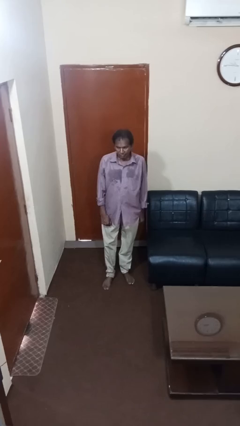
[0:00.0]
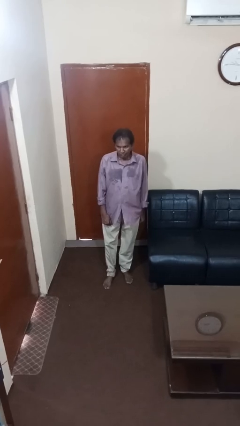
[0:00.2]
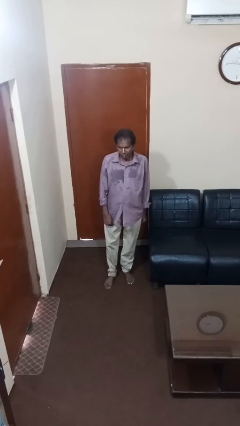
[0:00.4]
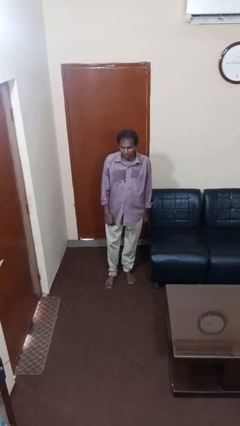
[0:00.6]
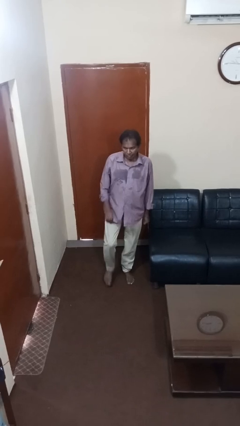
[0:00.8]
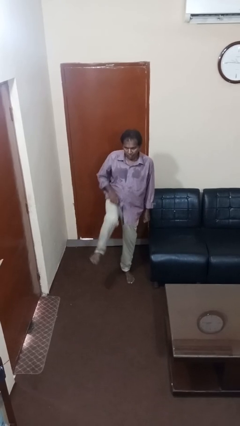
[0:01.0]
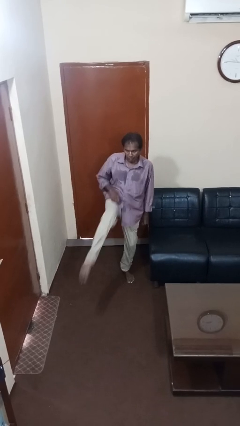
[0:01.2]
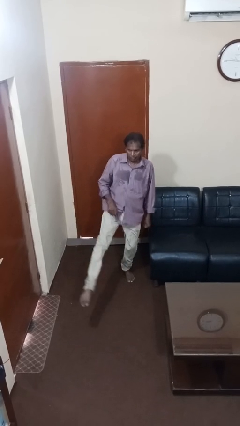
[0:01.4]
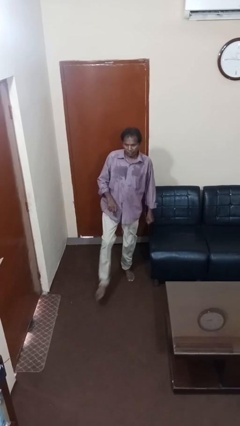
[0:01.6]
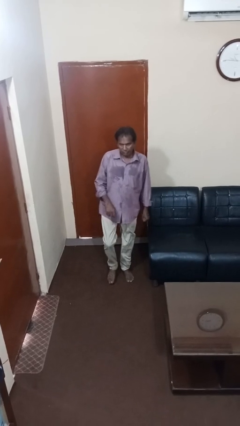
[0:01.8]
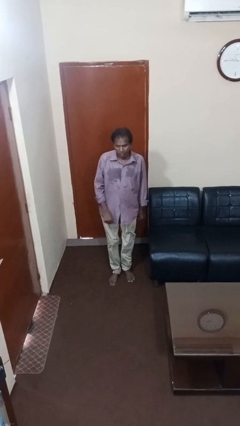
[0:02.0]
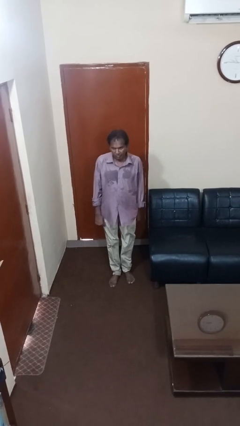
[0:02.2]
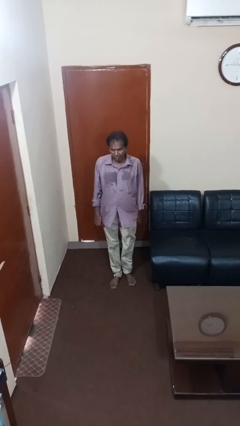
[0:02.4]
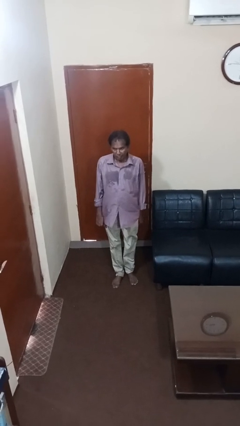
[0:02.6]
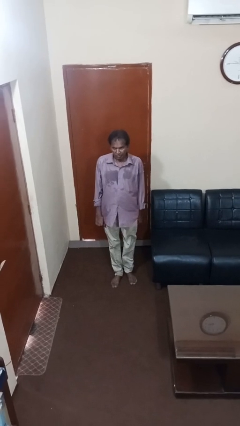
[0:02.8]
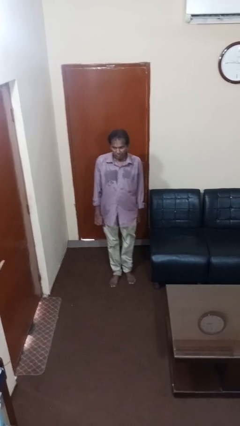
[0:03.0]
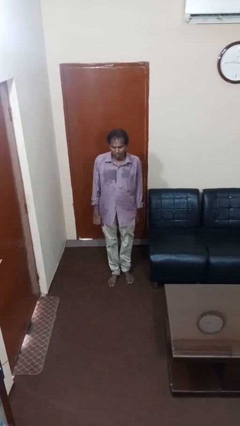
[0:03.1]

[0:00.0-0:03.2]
person karate kicks

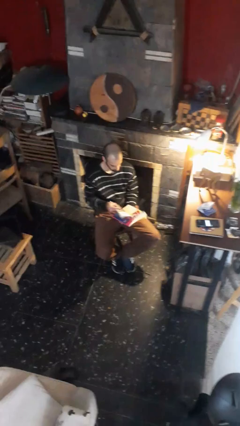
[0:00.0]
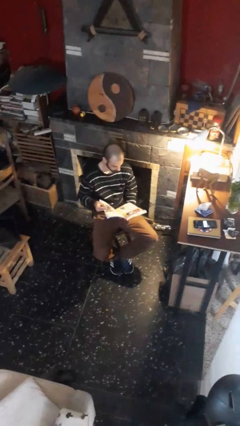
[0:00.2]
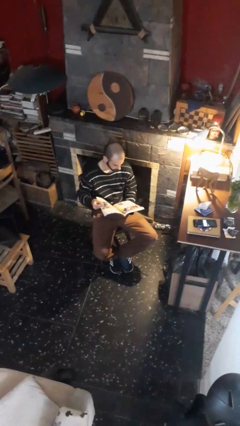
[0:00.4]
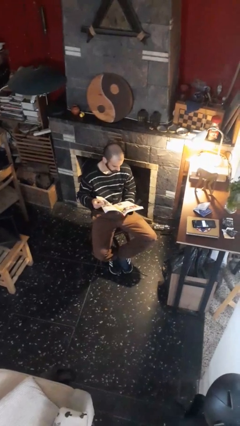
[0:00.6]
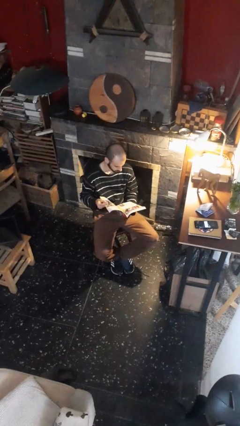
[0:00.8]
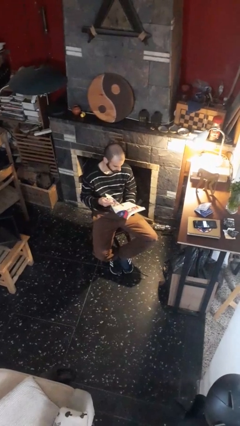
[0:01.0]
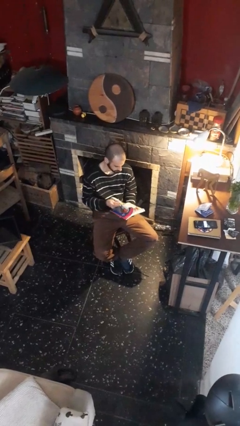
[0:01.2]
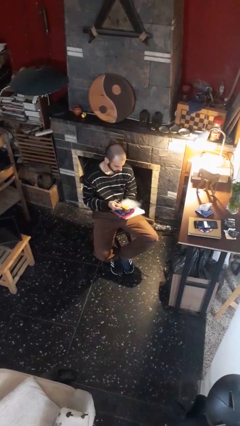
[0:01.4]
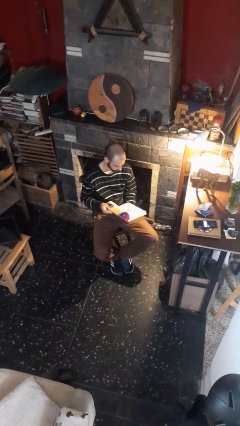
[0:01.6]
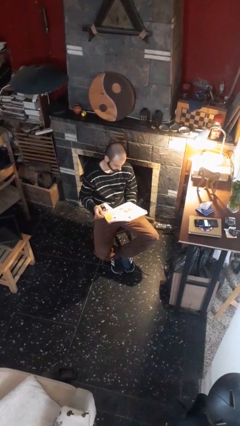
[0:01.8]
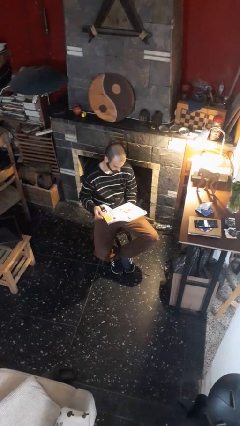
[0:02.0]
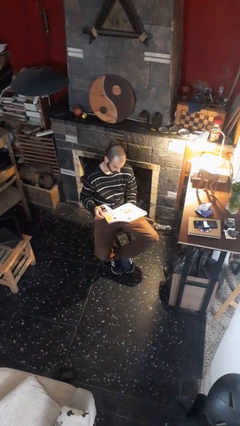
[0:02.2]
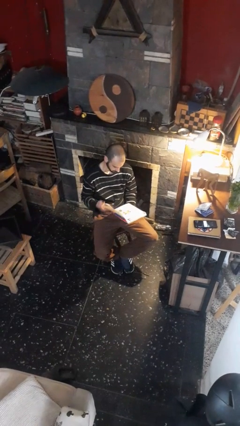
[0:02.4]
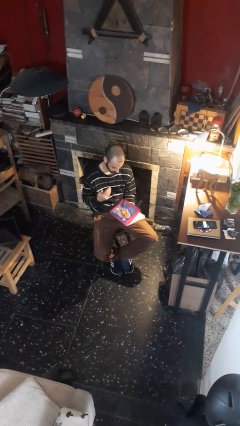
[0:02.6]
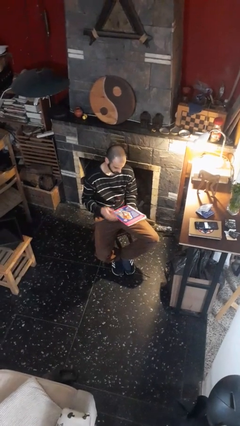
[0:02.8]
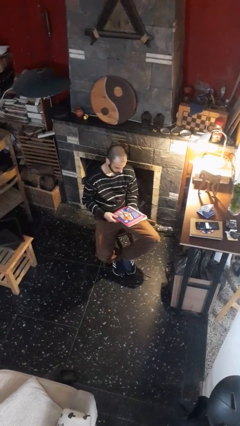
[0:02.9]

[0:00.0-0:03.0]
person reads magazine

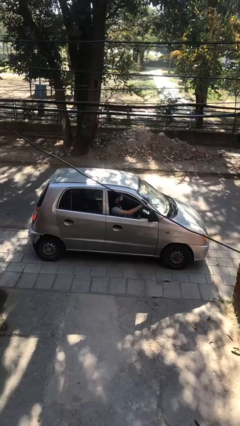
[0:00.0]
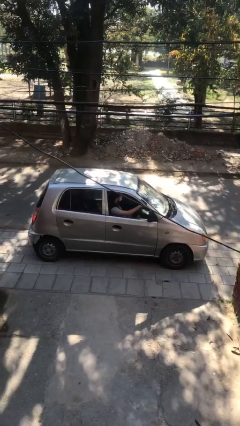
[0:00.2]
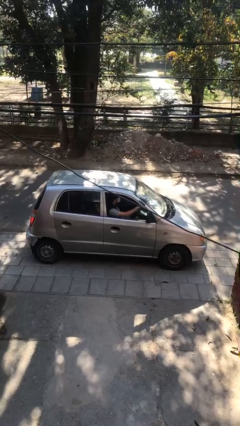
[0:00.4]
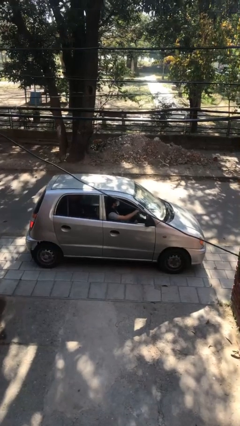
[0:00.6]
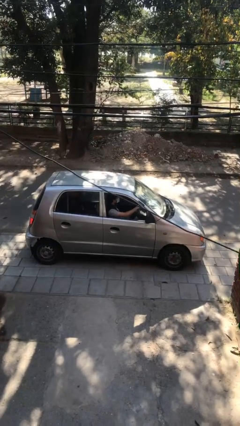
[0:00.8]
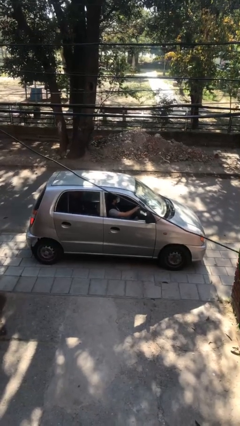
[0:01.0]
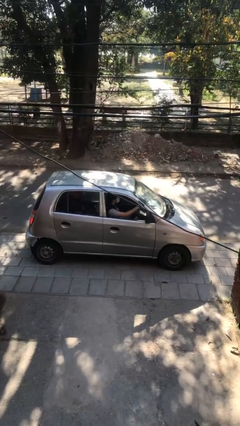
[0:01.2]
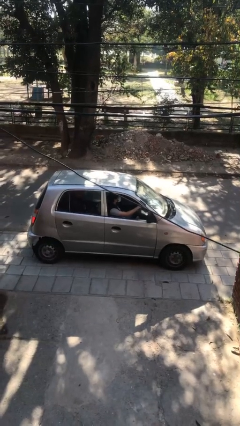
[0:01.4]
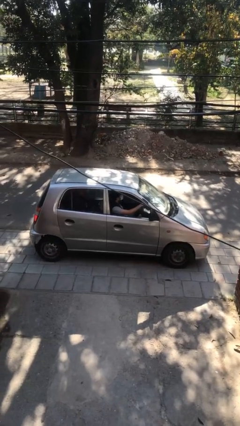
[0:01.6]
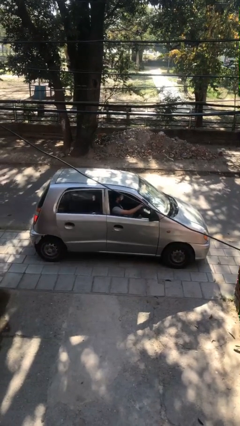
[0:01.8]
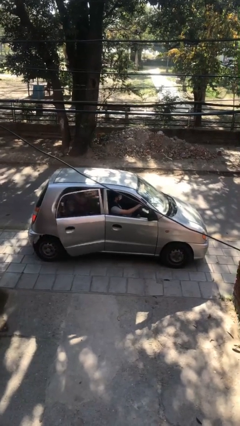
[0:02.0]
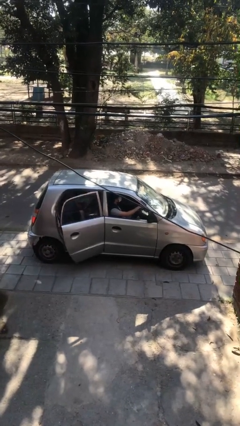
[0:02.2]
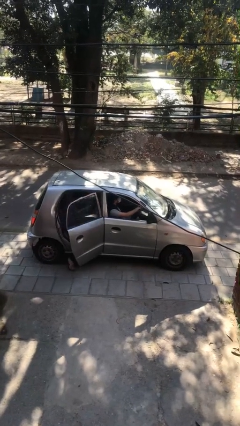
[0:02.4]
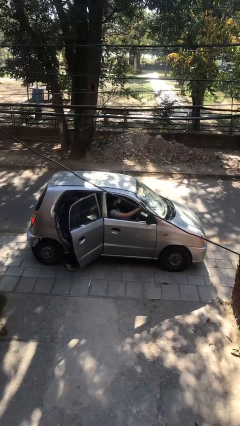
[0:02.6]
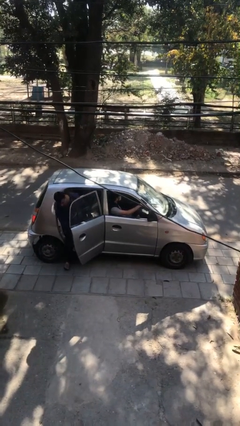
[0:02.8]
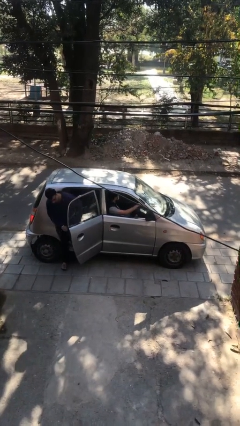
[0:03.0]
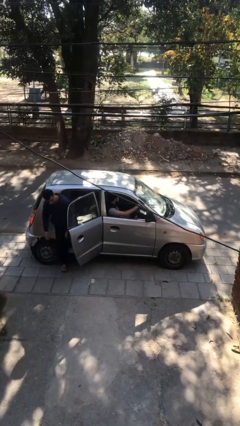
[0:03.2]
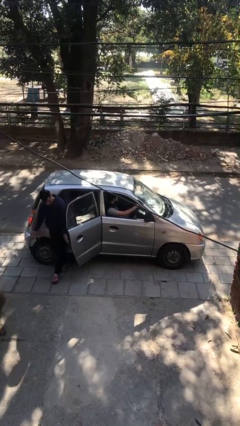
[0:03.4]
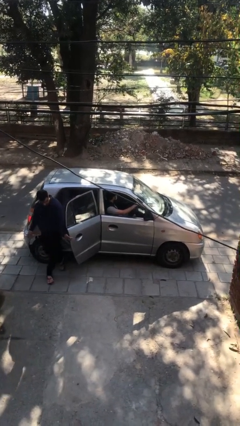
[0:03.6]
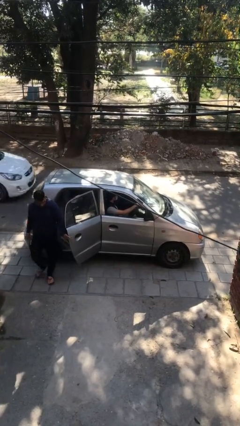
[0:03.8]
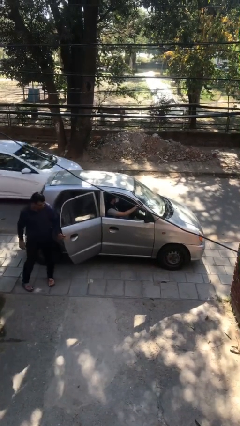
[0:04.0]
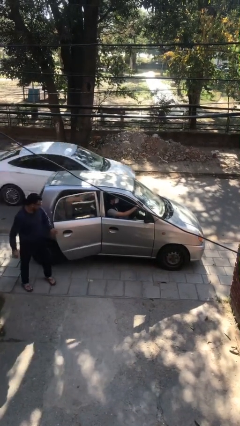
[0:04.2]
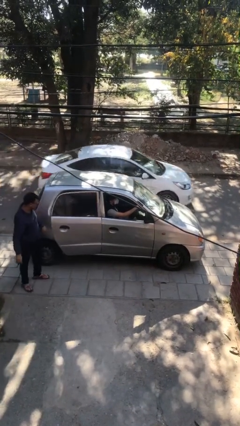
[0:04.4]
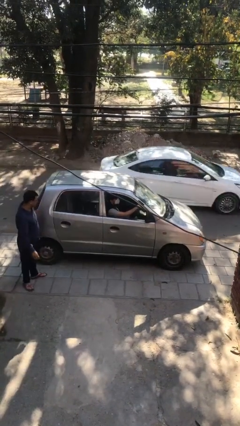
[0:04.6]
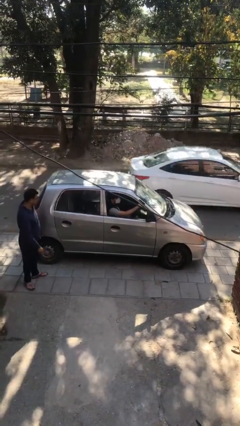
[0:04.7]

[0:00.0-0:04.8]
car drops off person

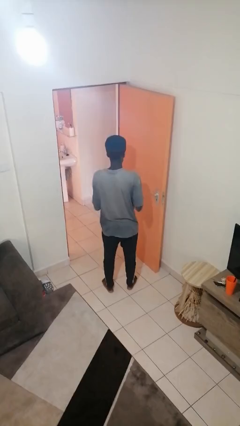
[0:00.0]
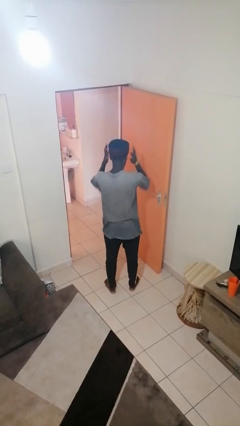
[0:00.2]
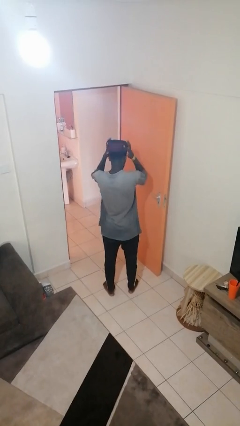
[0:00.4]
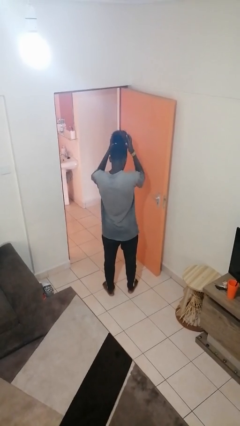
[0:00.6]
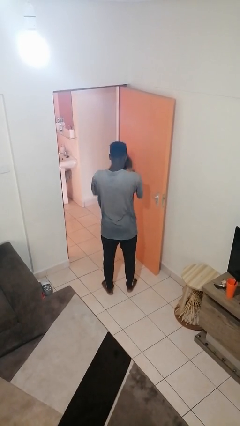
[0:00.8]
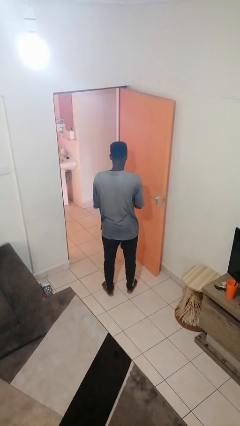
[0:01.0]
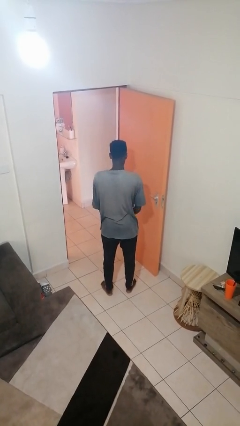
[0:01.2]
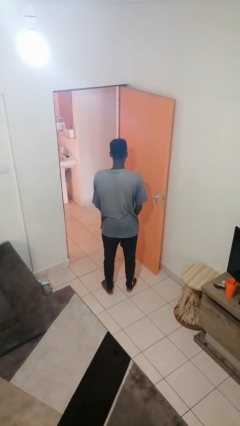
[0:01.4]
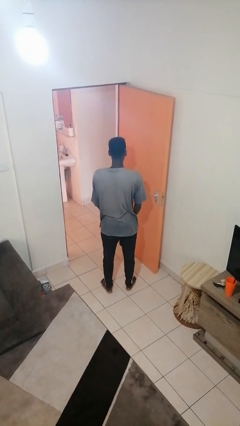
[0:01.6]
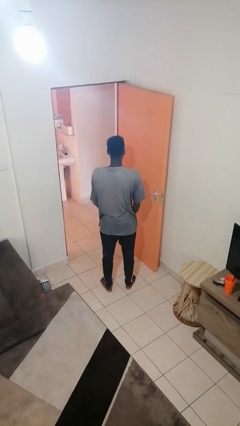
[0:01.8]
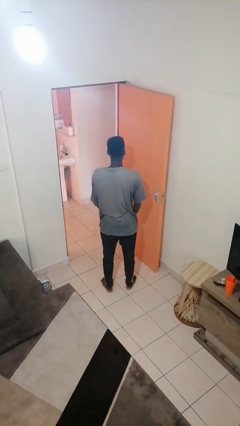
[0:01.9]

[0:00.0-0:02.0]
person takes off hat

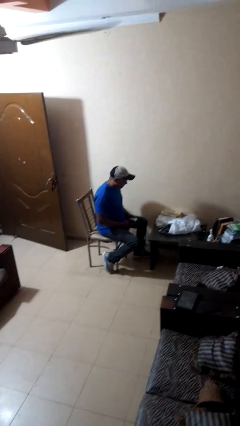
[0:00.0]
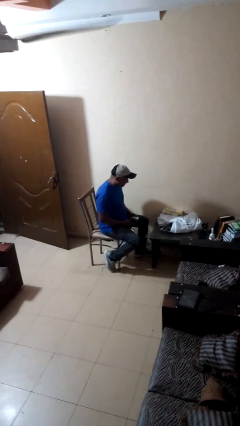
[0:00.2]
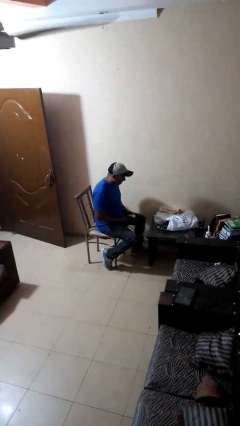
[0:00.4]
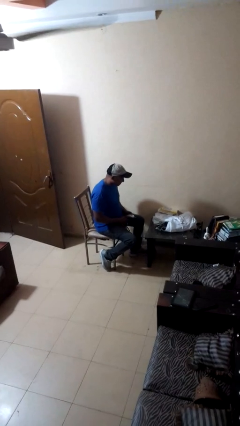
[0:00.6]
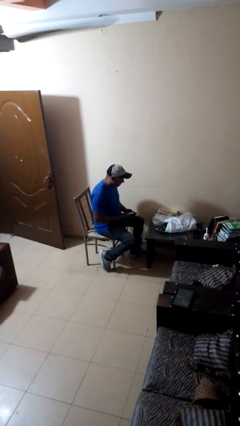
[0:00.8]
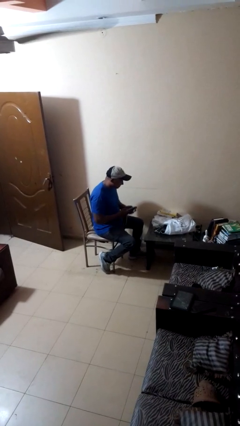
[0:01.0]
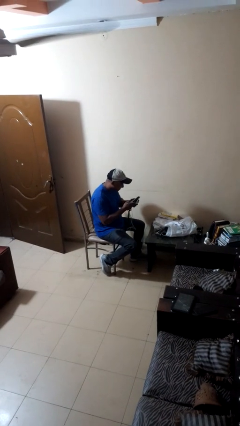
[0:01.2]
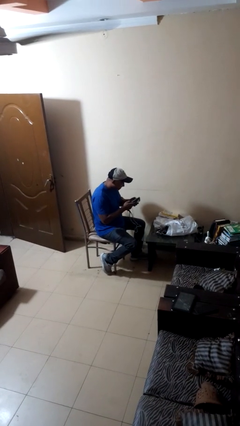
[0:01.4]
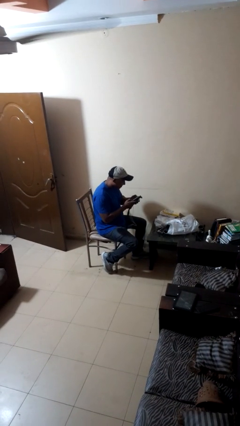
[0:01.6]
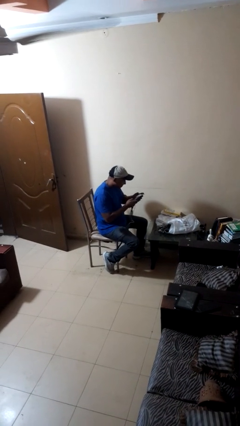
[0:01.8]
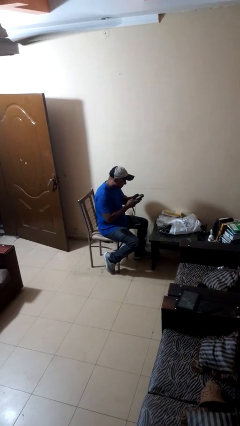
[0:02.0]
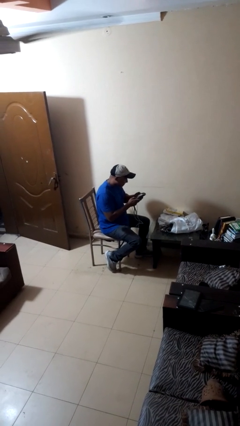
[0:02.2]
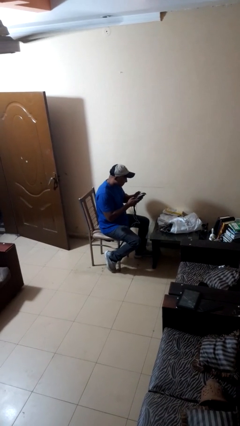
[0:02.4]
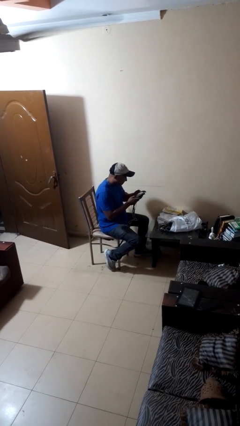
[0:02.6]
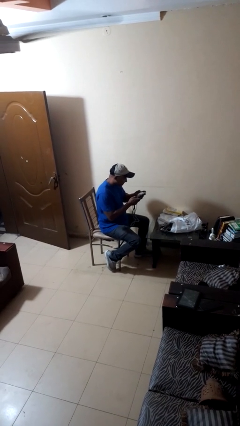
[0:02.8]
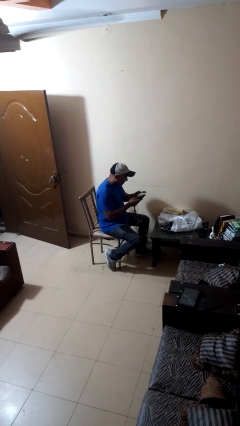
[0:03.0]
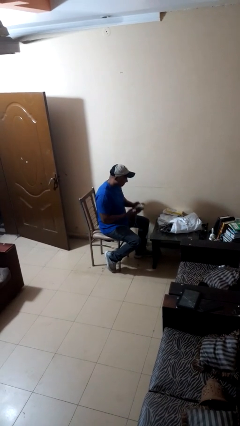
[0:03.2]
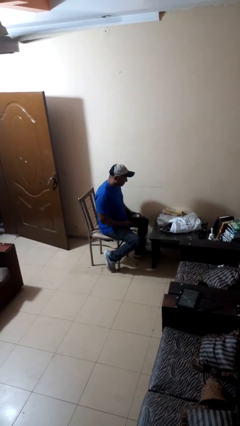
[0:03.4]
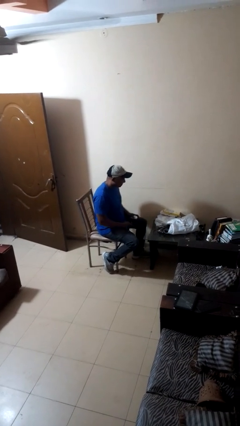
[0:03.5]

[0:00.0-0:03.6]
person interacts with handheld game

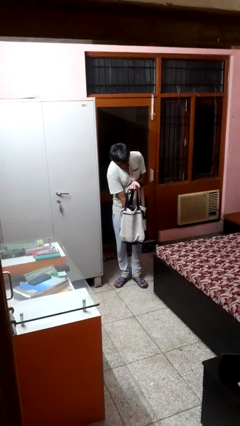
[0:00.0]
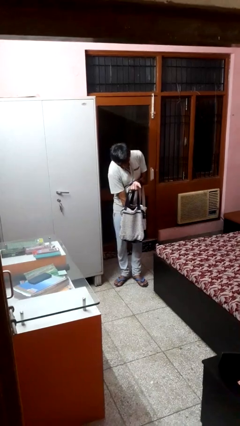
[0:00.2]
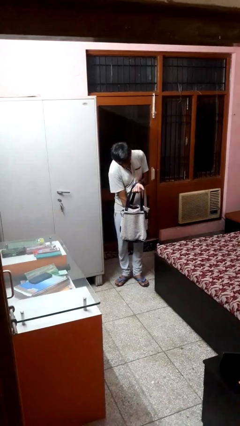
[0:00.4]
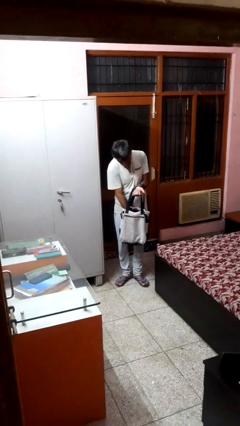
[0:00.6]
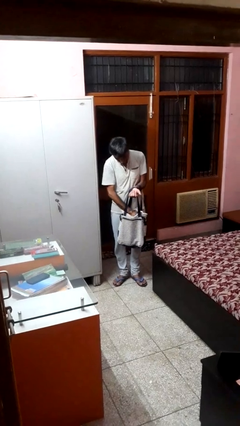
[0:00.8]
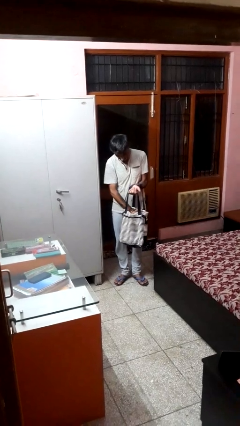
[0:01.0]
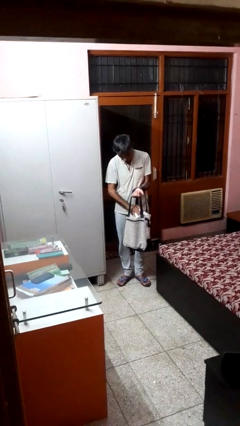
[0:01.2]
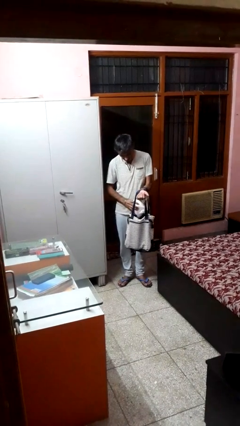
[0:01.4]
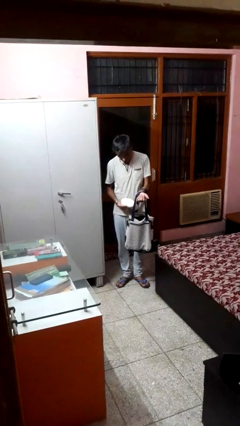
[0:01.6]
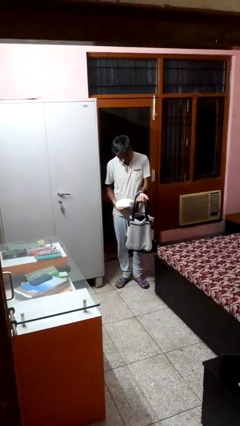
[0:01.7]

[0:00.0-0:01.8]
person takes object from bag
